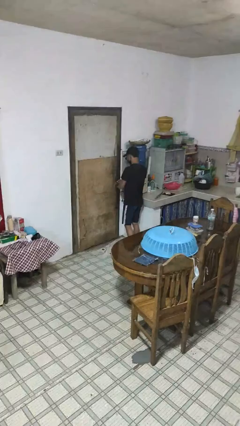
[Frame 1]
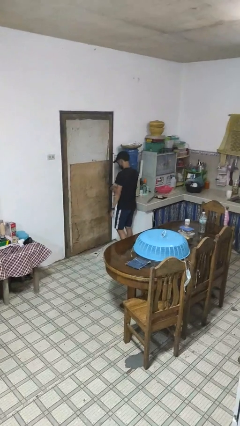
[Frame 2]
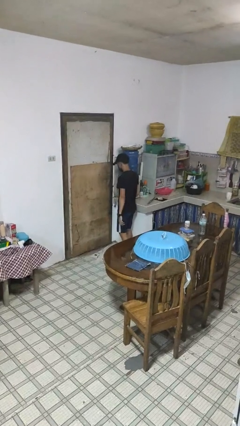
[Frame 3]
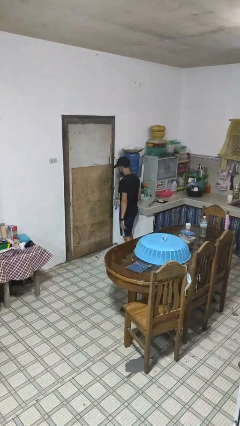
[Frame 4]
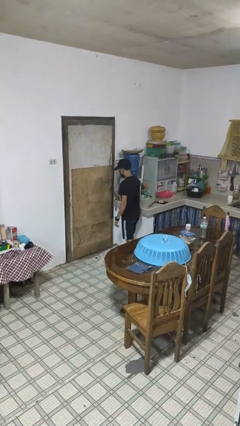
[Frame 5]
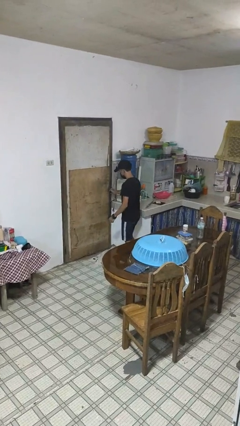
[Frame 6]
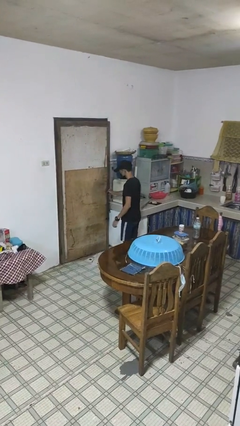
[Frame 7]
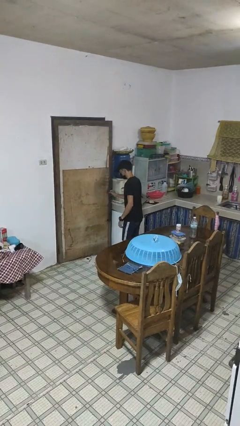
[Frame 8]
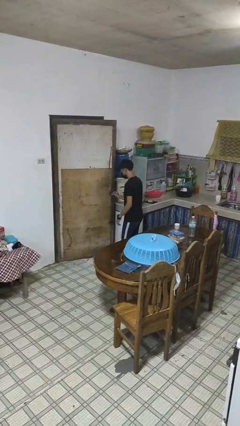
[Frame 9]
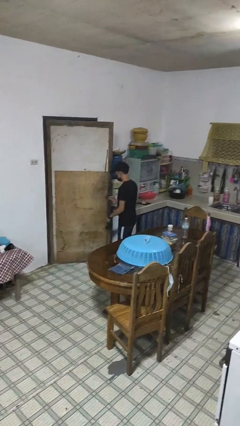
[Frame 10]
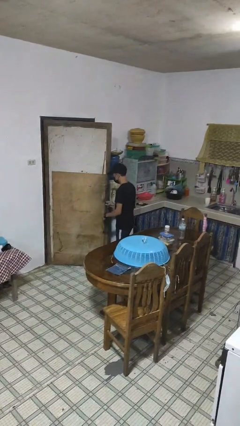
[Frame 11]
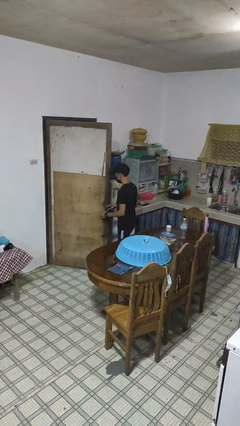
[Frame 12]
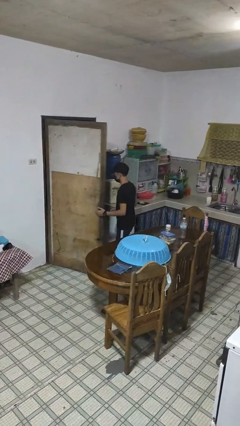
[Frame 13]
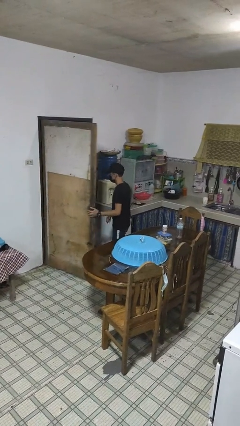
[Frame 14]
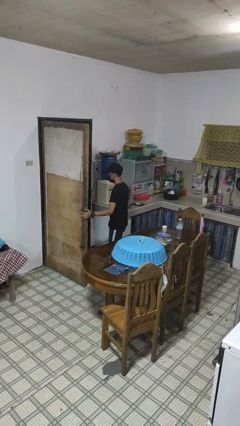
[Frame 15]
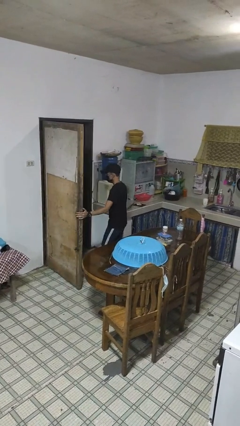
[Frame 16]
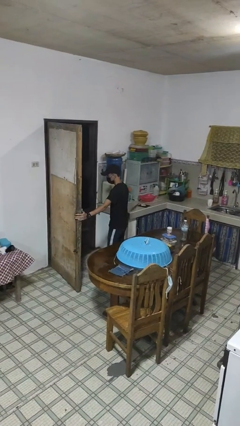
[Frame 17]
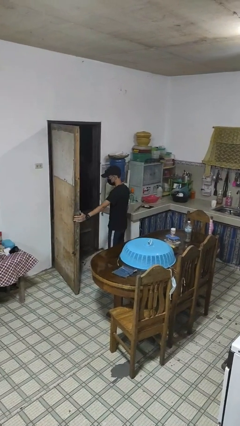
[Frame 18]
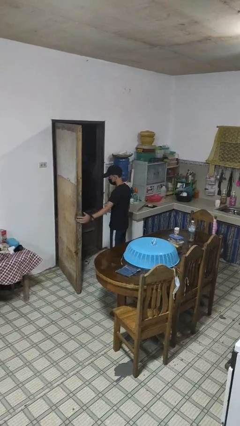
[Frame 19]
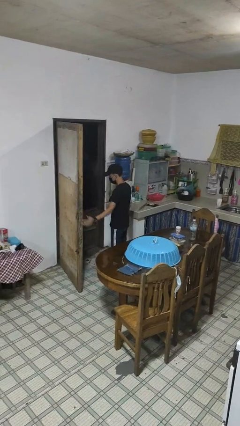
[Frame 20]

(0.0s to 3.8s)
person opens facility door

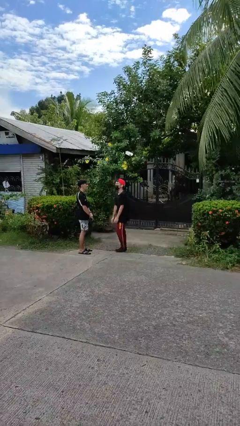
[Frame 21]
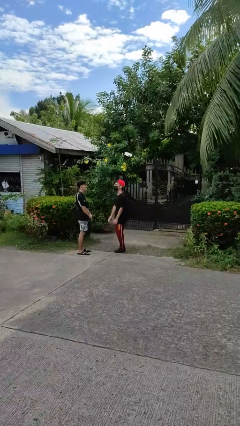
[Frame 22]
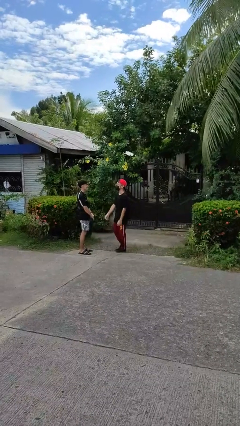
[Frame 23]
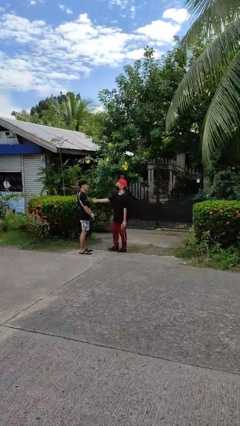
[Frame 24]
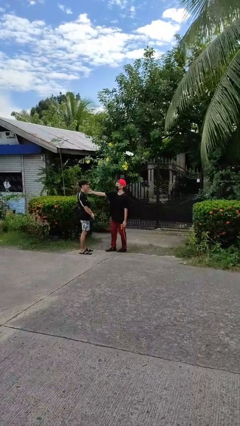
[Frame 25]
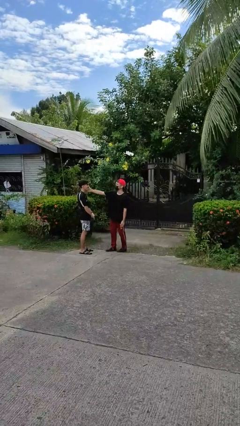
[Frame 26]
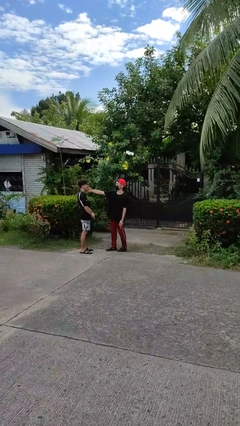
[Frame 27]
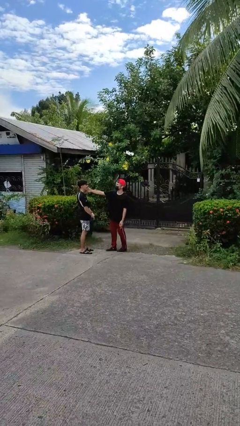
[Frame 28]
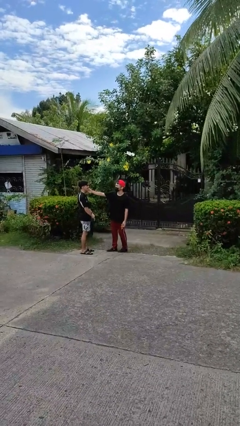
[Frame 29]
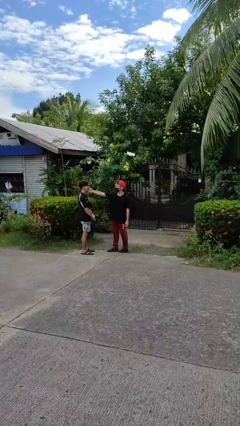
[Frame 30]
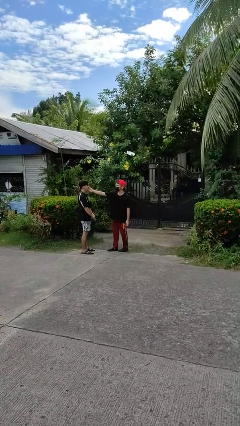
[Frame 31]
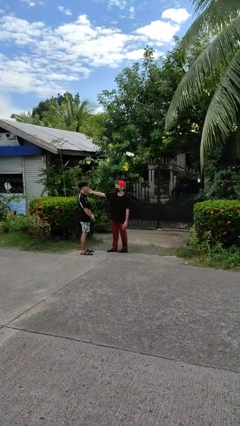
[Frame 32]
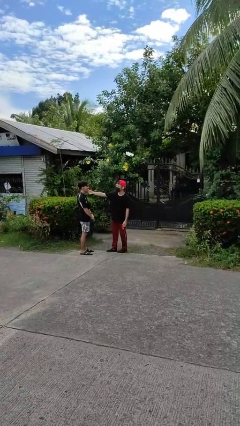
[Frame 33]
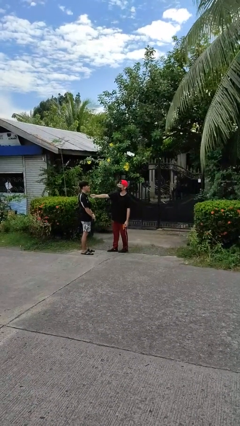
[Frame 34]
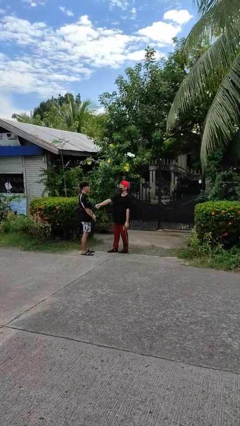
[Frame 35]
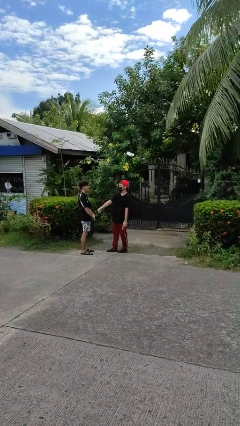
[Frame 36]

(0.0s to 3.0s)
person touches face of person

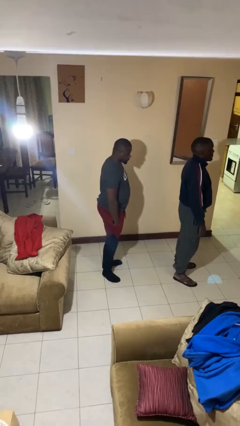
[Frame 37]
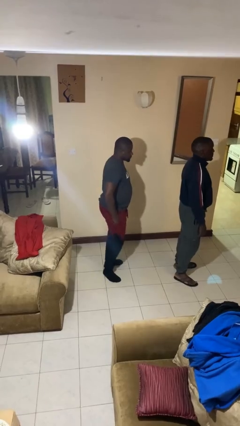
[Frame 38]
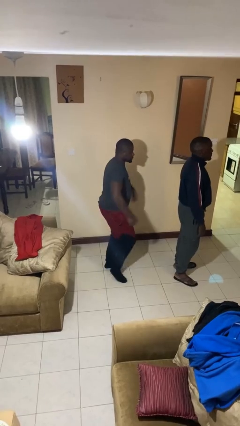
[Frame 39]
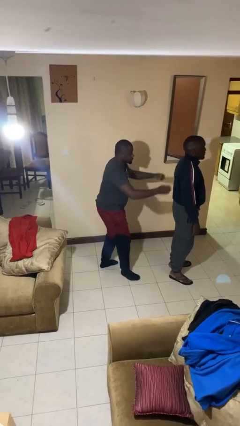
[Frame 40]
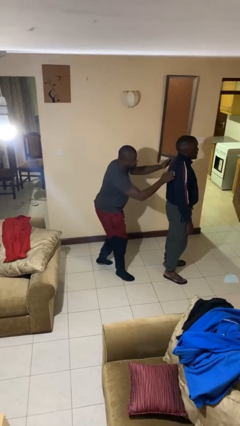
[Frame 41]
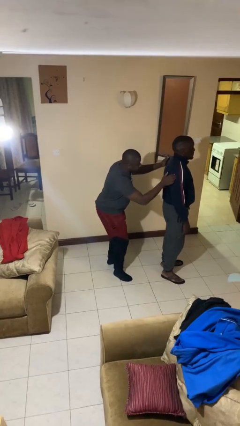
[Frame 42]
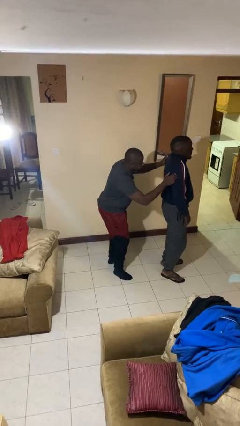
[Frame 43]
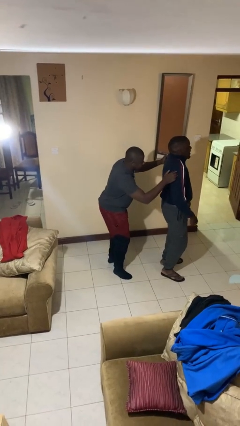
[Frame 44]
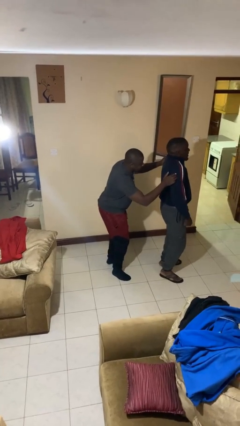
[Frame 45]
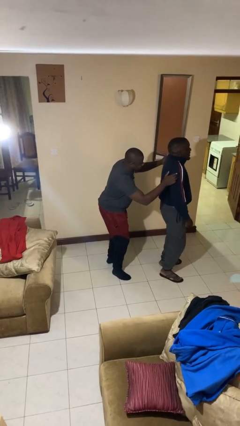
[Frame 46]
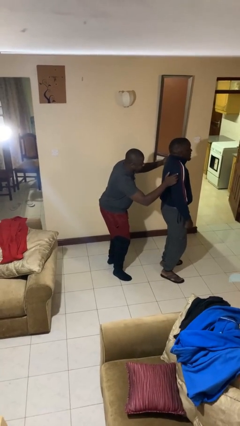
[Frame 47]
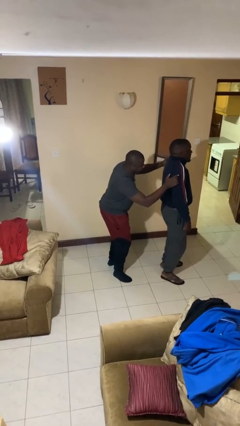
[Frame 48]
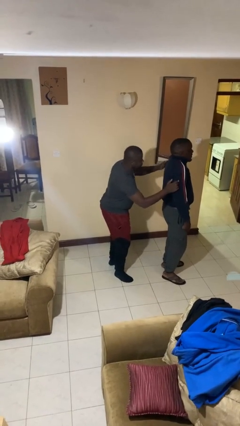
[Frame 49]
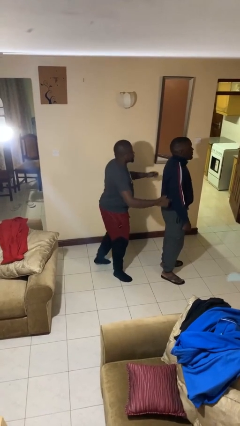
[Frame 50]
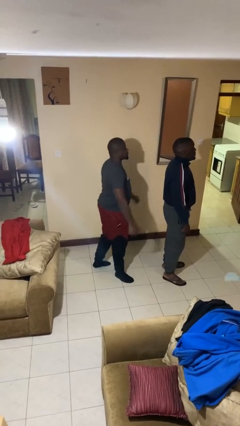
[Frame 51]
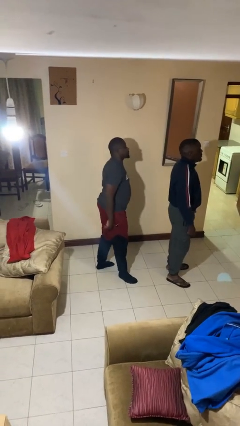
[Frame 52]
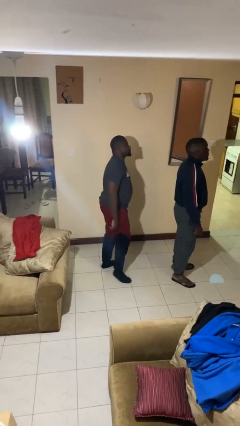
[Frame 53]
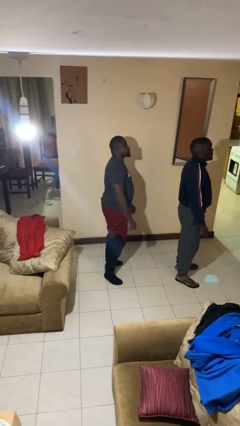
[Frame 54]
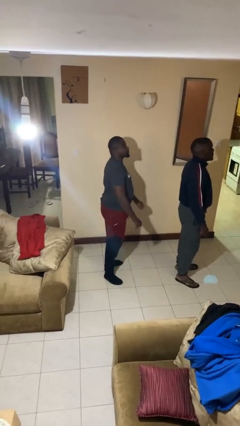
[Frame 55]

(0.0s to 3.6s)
person tickles person

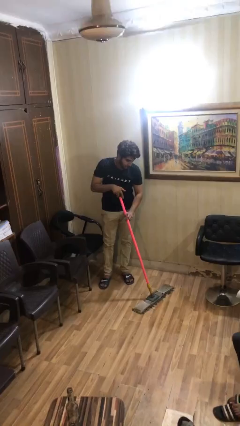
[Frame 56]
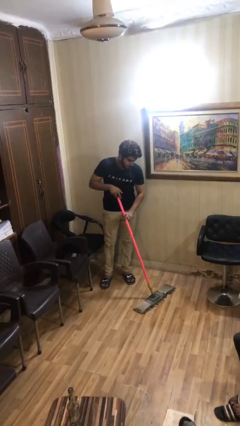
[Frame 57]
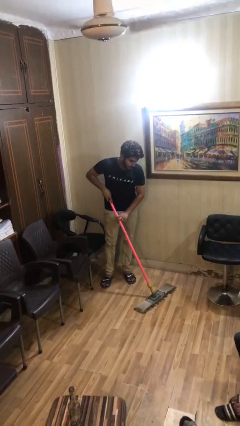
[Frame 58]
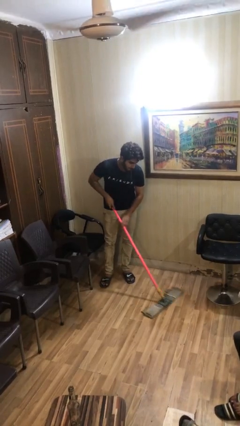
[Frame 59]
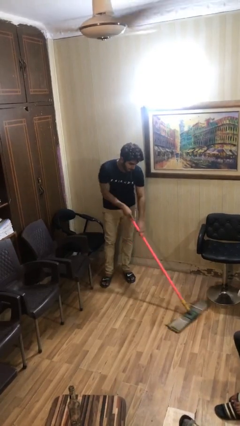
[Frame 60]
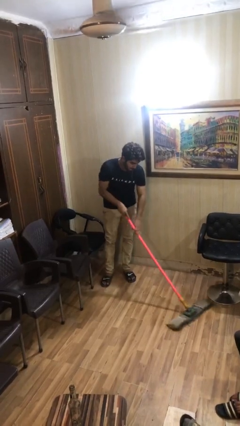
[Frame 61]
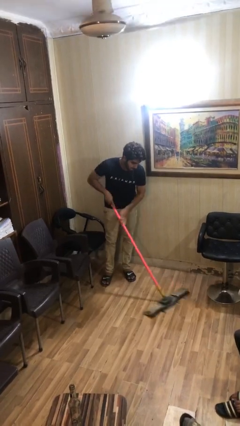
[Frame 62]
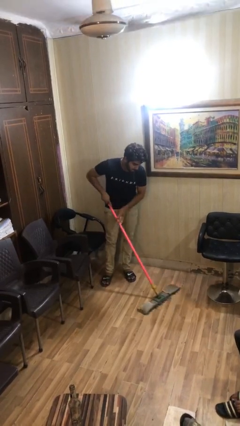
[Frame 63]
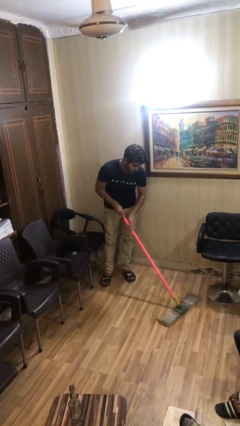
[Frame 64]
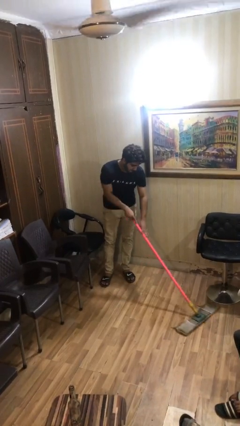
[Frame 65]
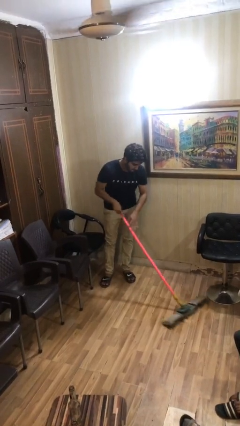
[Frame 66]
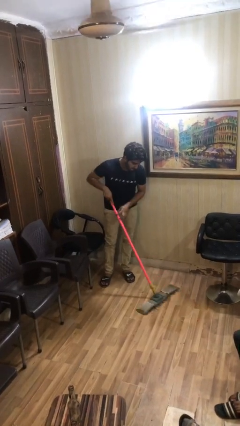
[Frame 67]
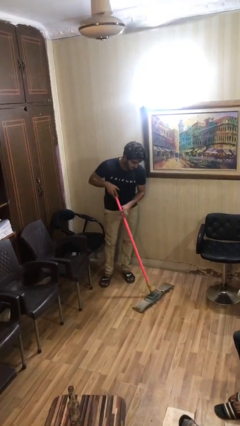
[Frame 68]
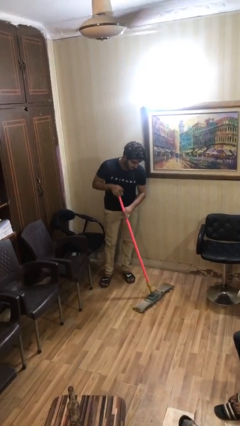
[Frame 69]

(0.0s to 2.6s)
person sweeps floor

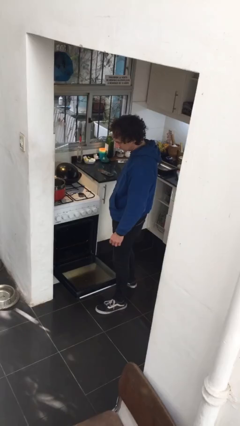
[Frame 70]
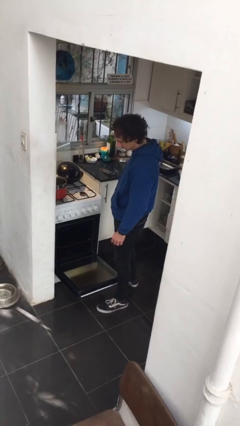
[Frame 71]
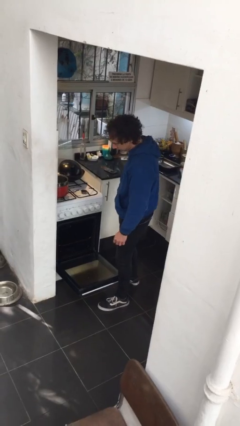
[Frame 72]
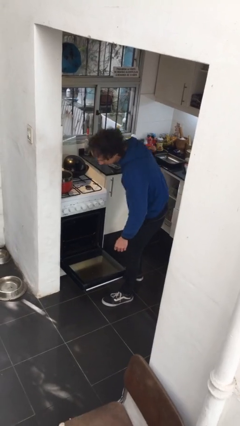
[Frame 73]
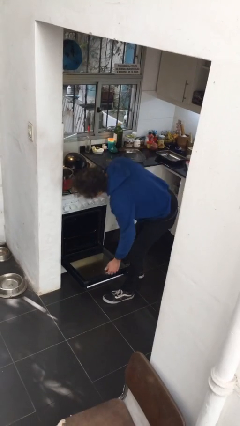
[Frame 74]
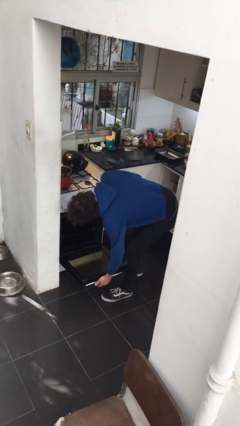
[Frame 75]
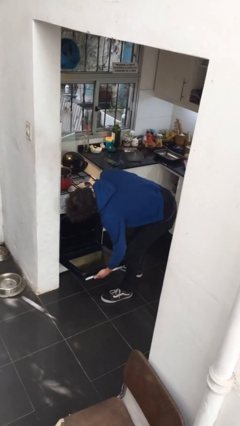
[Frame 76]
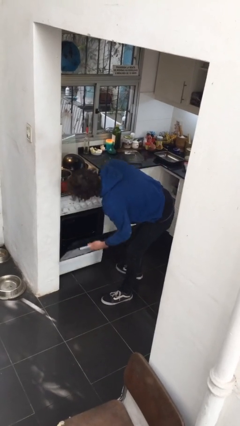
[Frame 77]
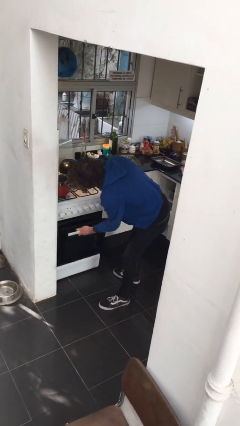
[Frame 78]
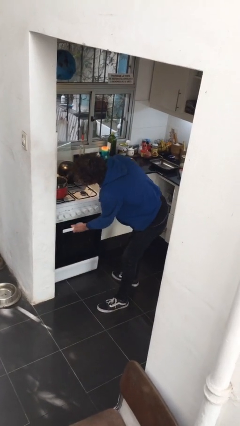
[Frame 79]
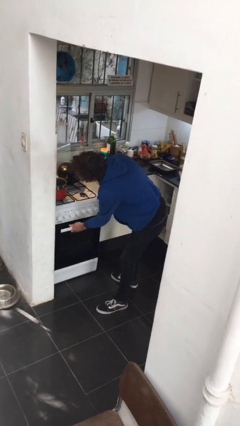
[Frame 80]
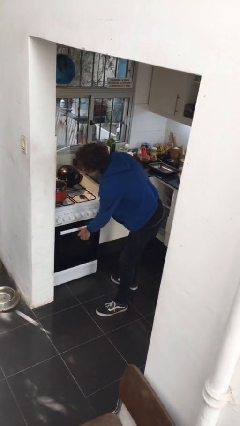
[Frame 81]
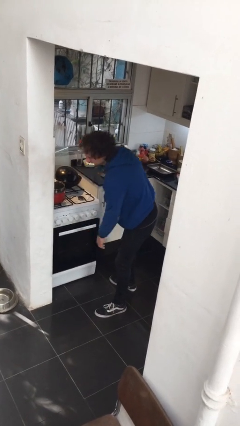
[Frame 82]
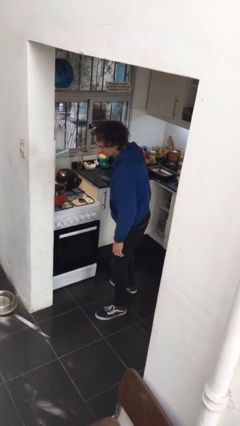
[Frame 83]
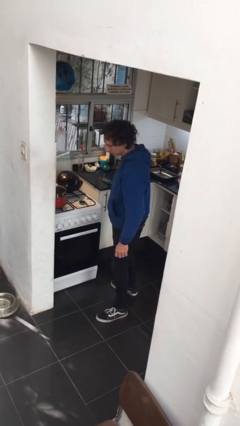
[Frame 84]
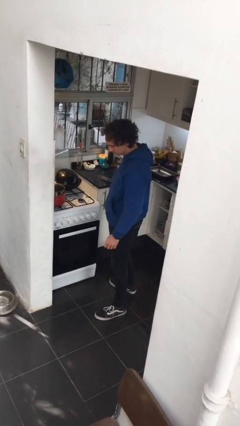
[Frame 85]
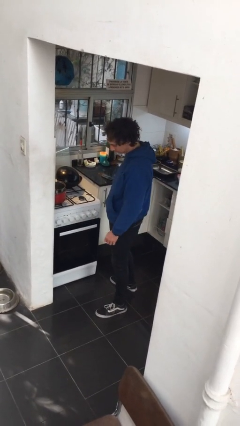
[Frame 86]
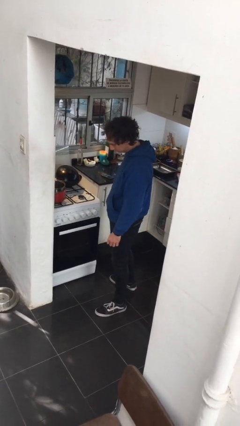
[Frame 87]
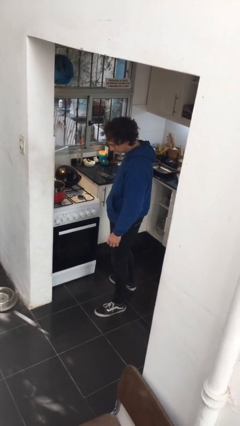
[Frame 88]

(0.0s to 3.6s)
person closes oven door

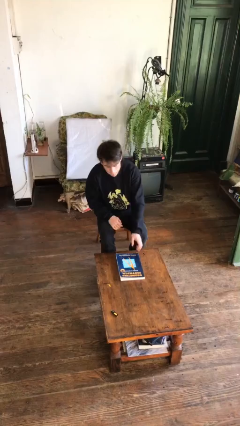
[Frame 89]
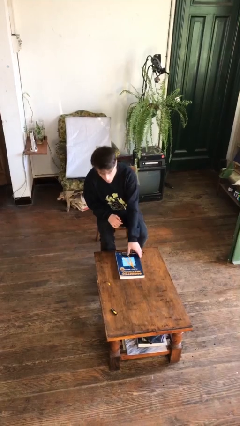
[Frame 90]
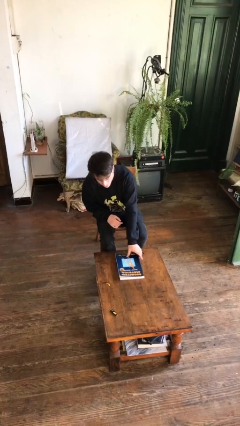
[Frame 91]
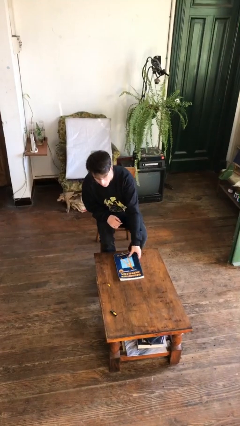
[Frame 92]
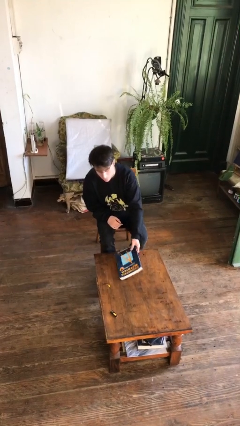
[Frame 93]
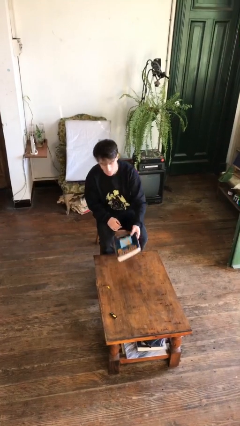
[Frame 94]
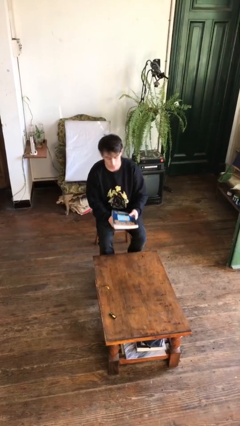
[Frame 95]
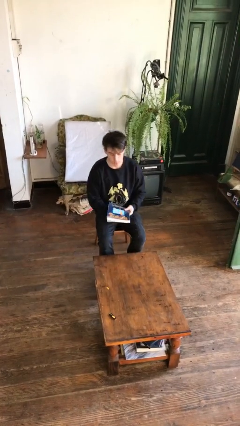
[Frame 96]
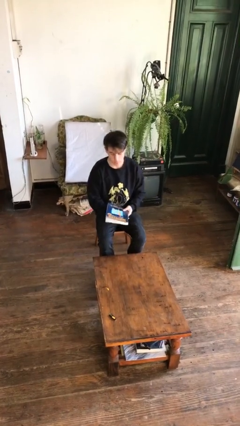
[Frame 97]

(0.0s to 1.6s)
person picks up object from table
